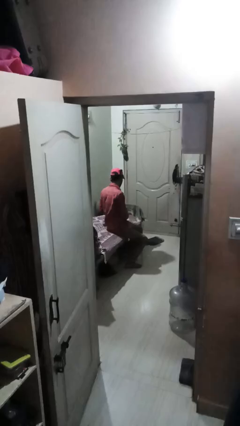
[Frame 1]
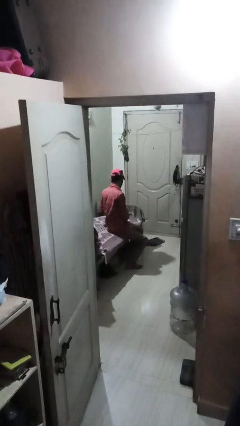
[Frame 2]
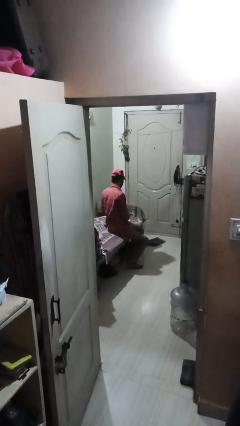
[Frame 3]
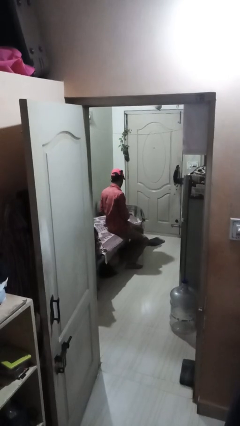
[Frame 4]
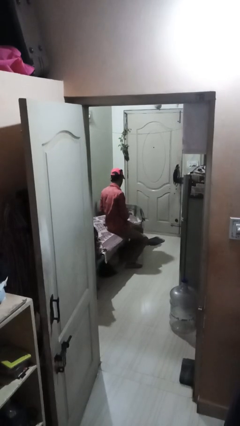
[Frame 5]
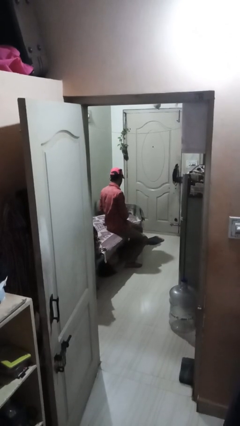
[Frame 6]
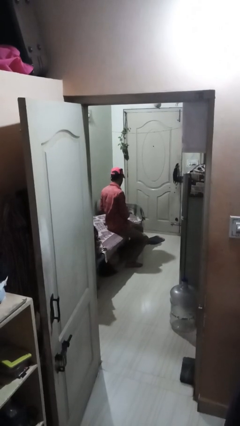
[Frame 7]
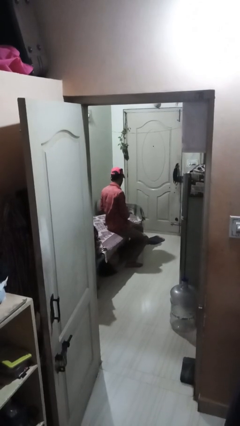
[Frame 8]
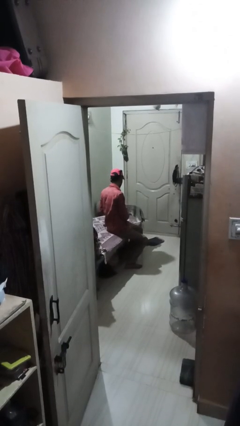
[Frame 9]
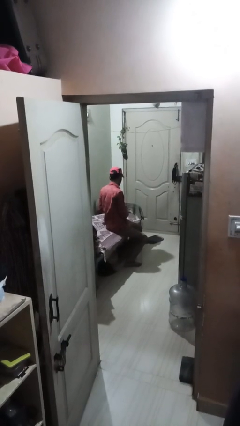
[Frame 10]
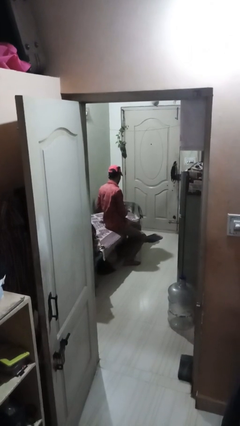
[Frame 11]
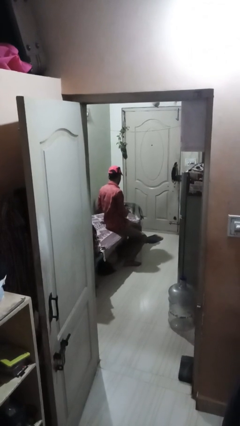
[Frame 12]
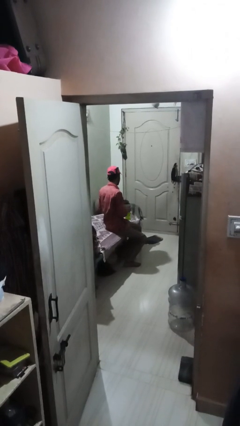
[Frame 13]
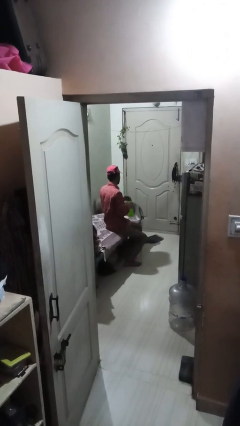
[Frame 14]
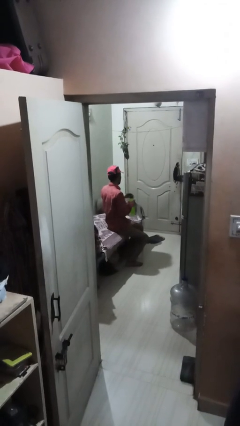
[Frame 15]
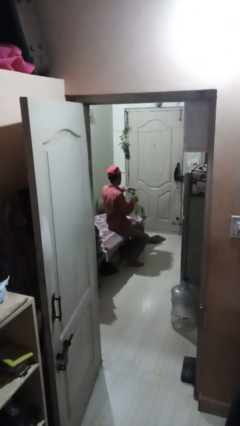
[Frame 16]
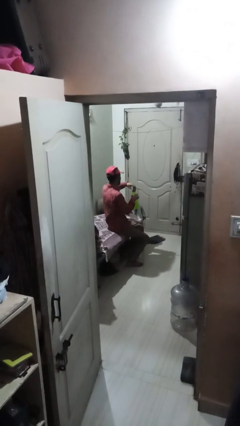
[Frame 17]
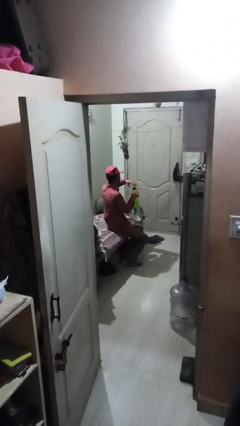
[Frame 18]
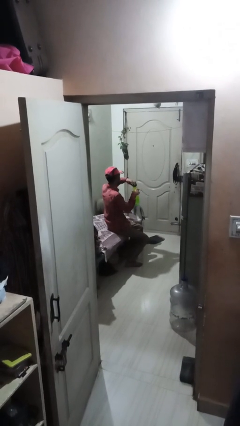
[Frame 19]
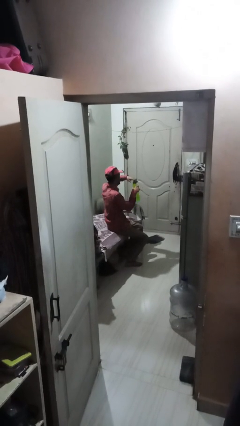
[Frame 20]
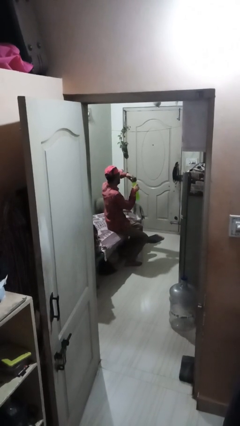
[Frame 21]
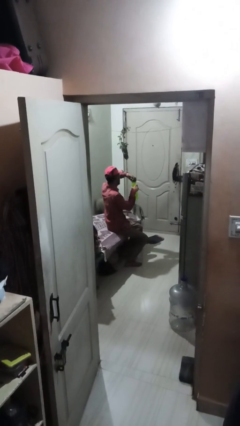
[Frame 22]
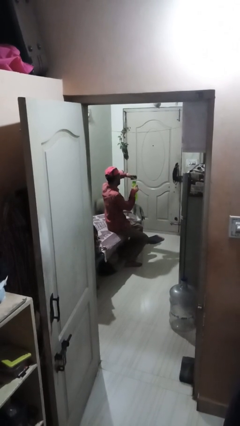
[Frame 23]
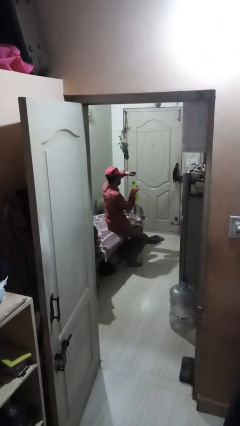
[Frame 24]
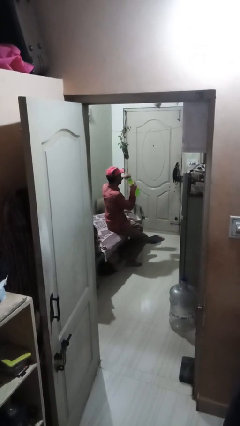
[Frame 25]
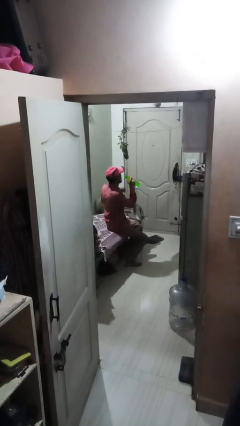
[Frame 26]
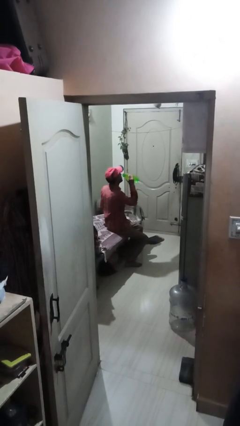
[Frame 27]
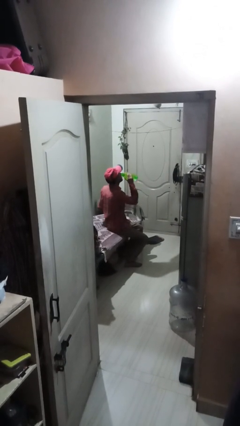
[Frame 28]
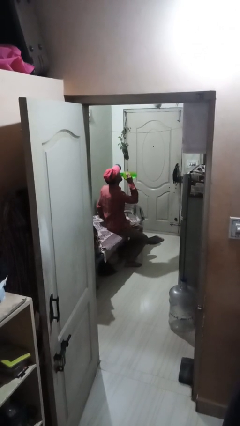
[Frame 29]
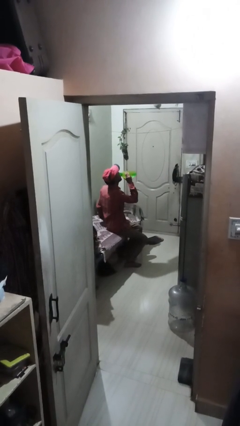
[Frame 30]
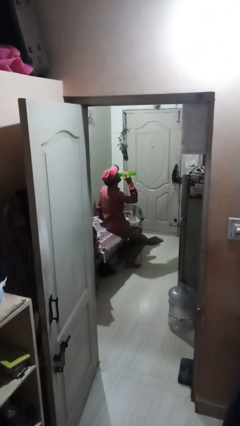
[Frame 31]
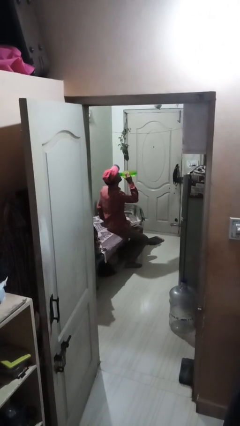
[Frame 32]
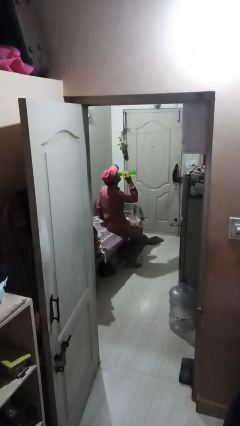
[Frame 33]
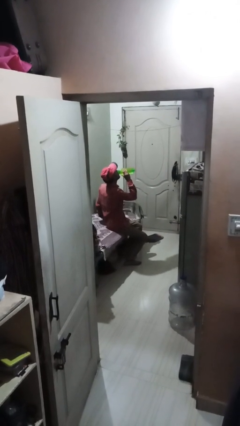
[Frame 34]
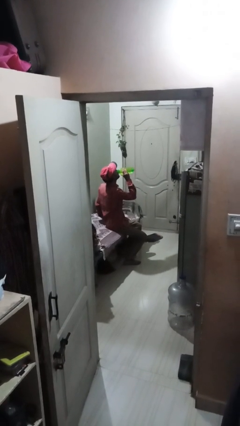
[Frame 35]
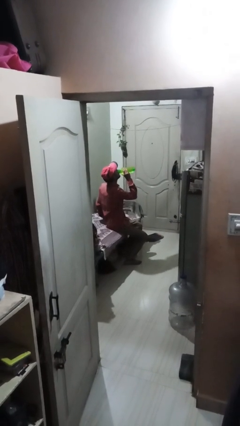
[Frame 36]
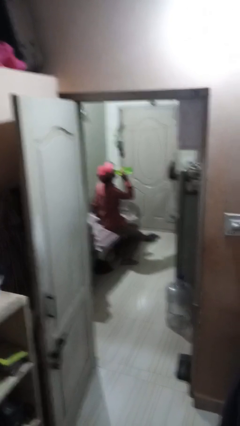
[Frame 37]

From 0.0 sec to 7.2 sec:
person drinks from bottle

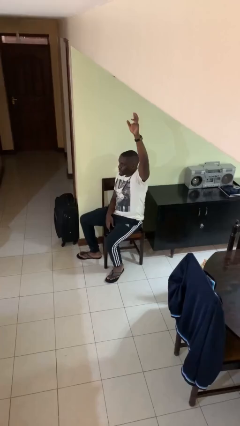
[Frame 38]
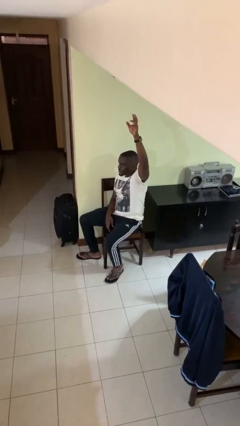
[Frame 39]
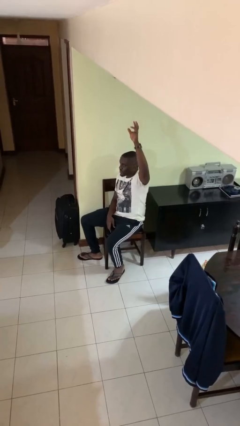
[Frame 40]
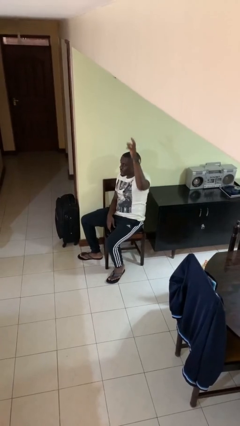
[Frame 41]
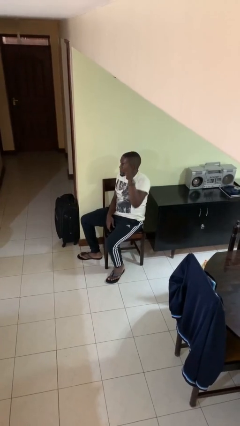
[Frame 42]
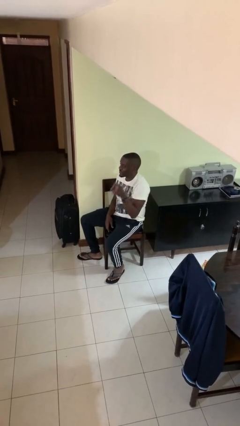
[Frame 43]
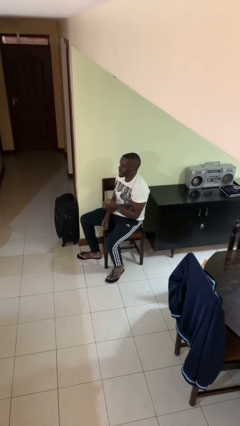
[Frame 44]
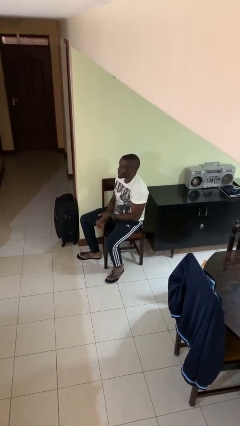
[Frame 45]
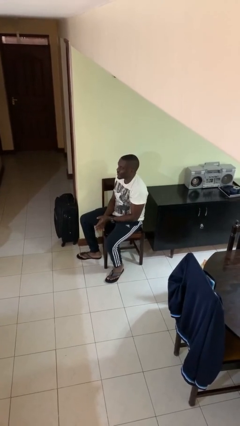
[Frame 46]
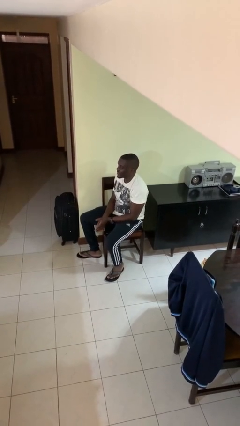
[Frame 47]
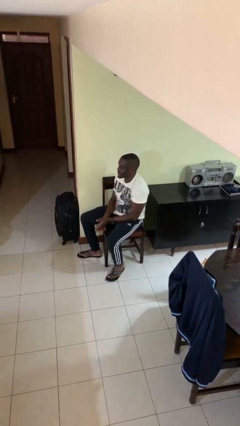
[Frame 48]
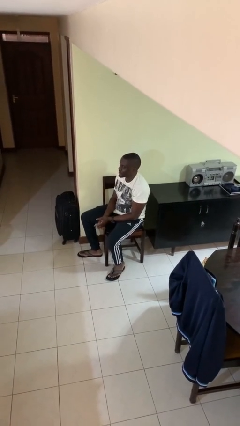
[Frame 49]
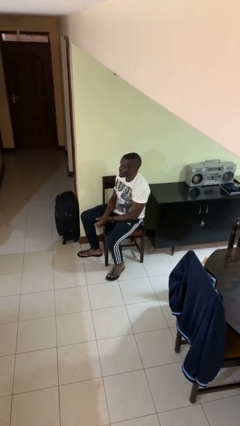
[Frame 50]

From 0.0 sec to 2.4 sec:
person gestures lower hand

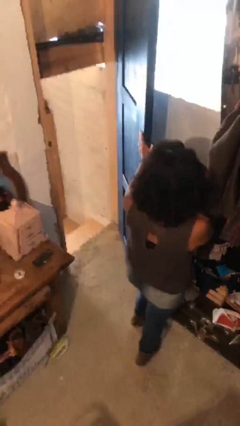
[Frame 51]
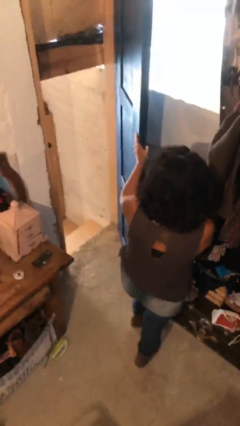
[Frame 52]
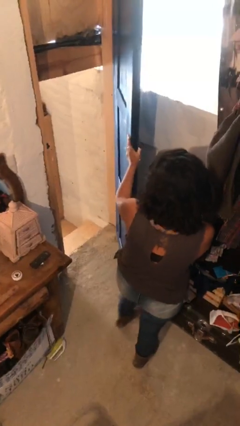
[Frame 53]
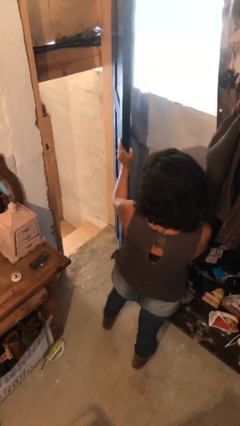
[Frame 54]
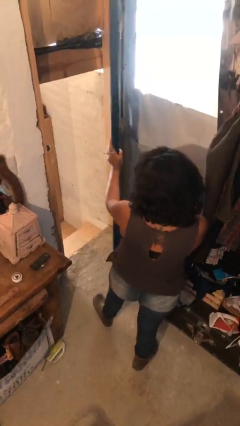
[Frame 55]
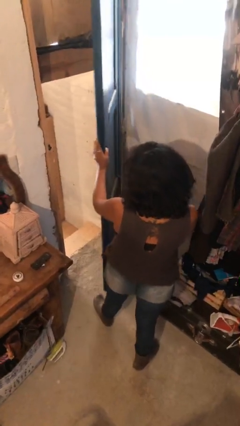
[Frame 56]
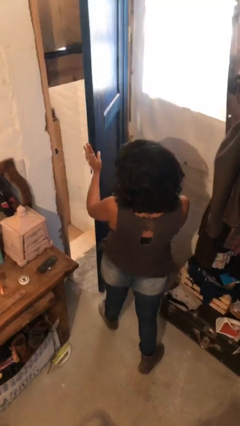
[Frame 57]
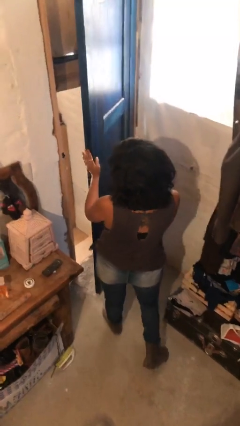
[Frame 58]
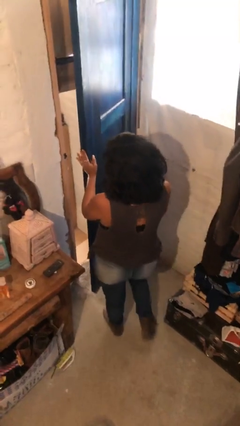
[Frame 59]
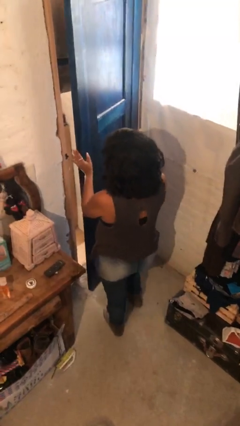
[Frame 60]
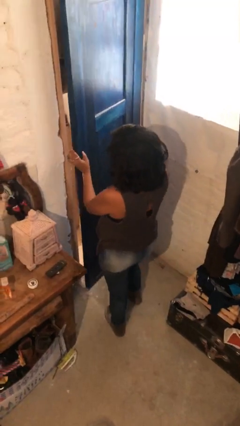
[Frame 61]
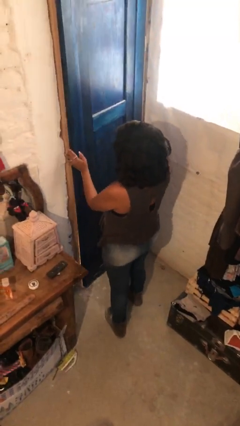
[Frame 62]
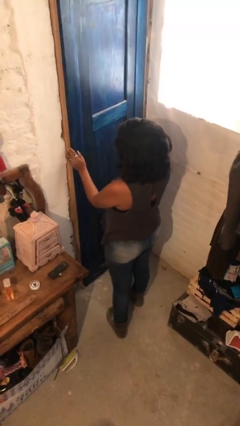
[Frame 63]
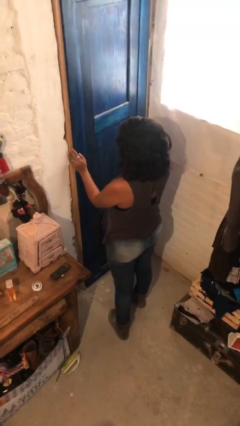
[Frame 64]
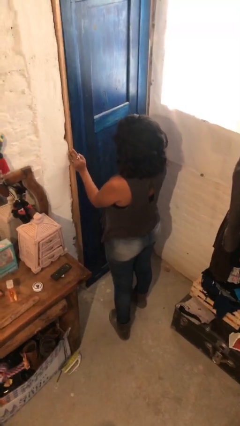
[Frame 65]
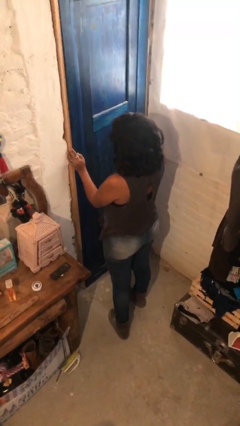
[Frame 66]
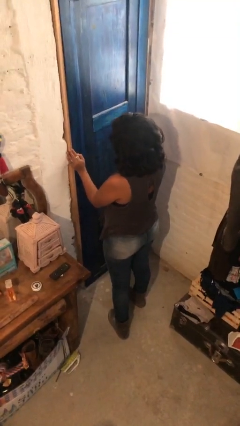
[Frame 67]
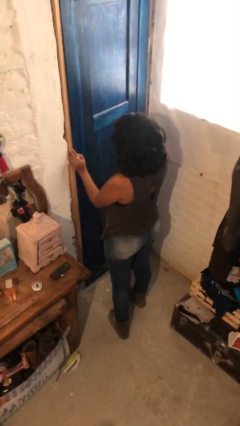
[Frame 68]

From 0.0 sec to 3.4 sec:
person closes facility door

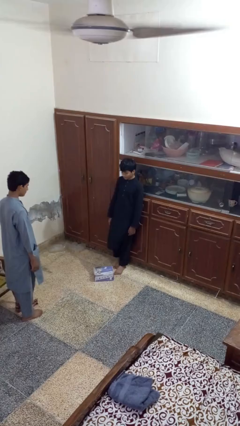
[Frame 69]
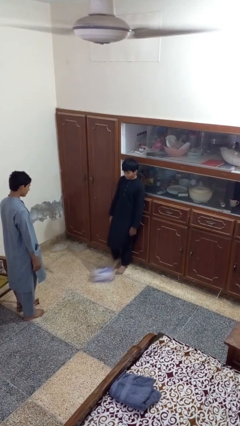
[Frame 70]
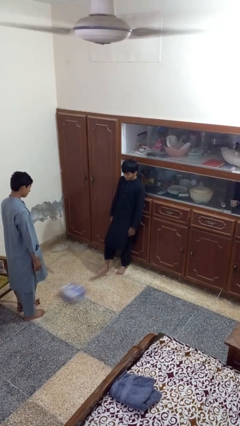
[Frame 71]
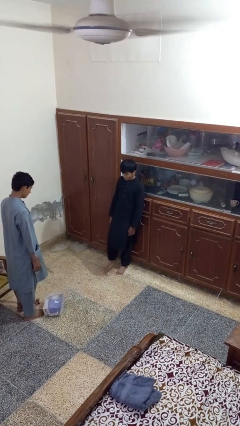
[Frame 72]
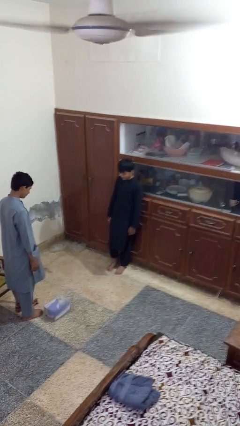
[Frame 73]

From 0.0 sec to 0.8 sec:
person kicks object to person

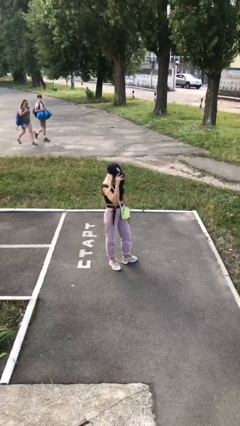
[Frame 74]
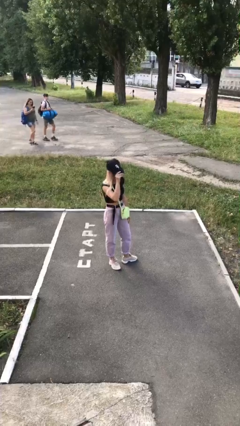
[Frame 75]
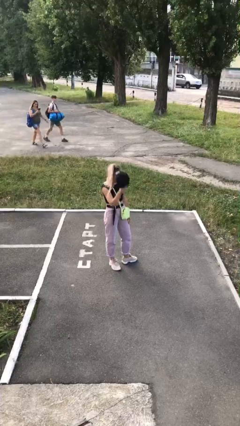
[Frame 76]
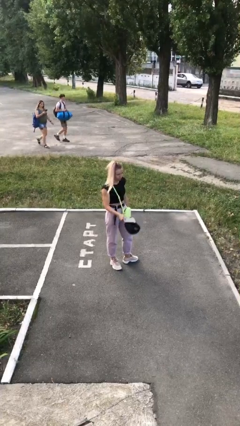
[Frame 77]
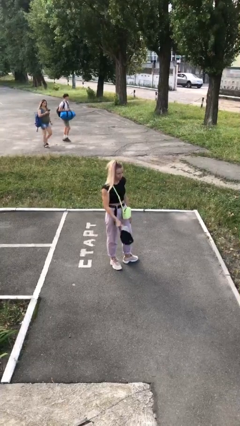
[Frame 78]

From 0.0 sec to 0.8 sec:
person takes off hat

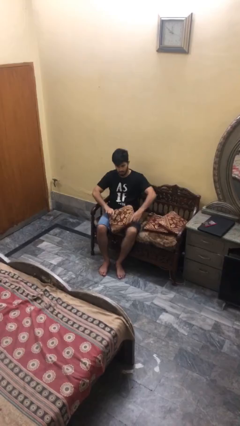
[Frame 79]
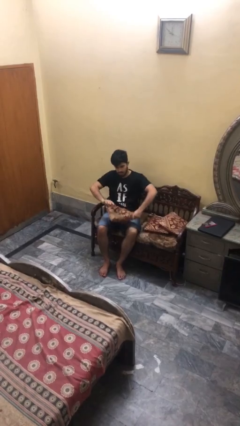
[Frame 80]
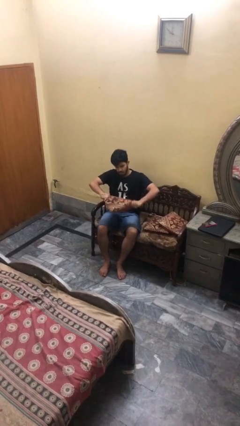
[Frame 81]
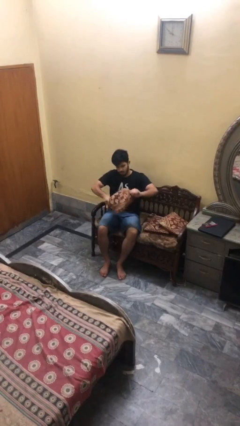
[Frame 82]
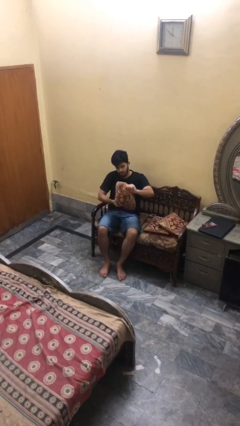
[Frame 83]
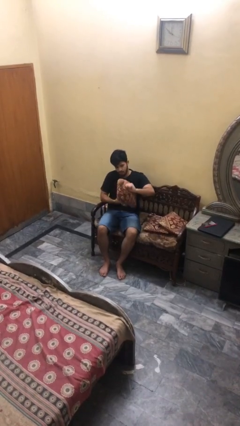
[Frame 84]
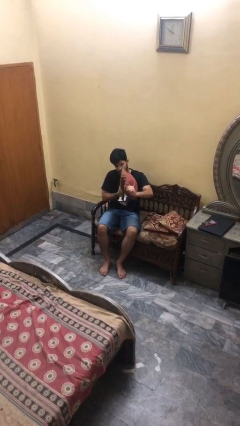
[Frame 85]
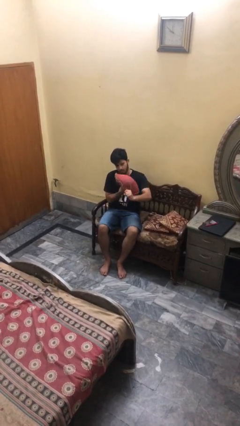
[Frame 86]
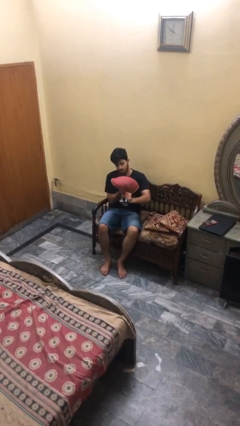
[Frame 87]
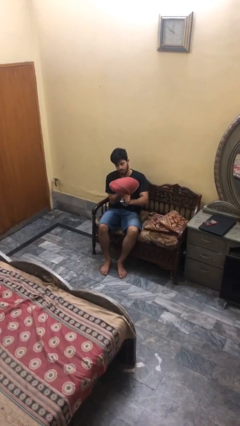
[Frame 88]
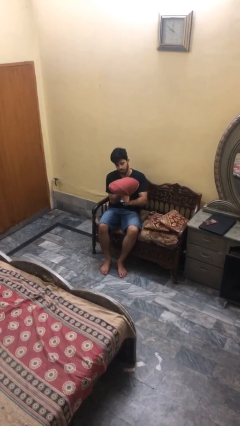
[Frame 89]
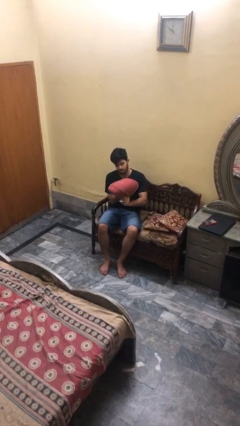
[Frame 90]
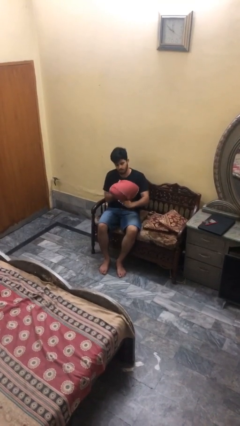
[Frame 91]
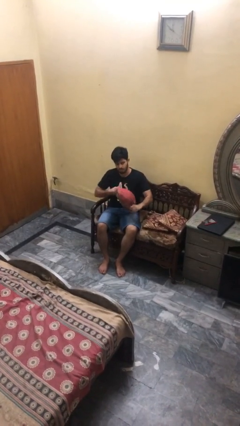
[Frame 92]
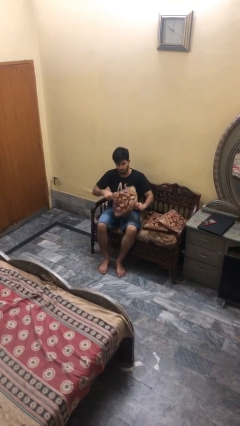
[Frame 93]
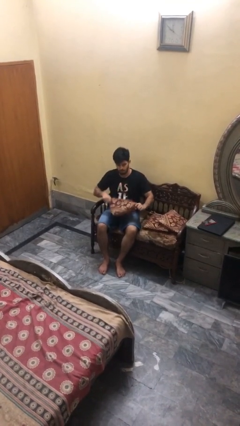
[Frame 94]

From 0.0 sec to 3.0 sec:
person squeezes object
